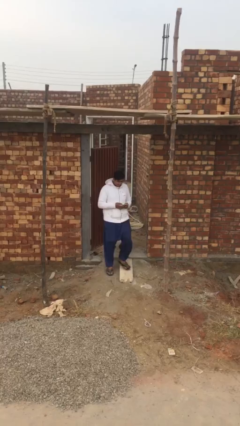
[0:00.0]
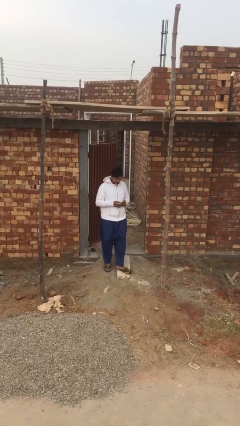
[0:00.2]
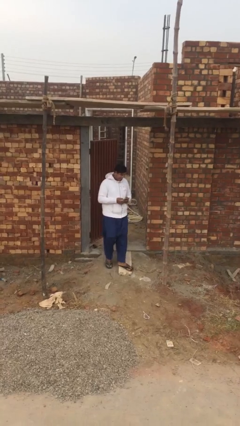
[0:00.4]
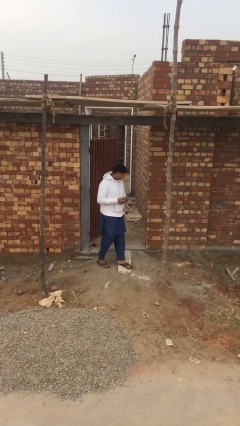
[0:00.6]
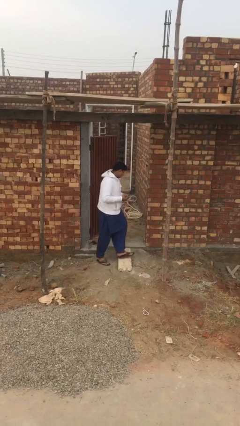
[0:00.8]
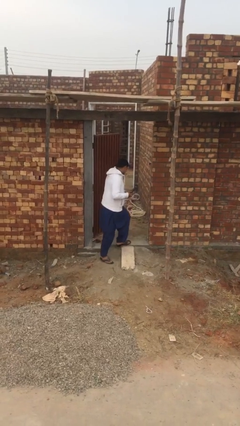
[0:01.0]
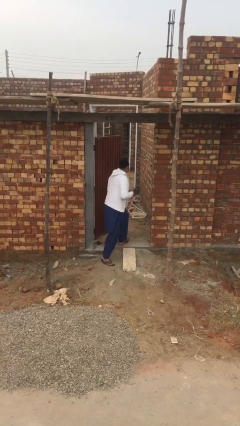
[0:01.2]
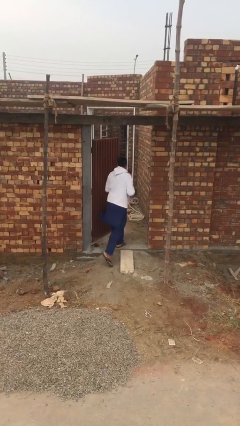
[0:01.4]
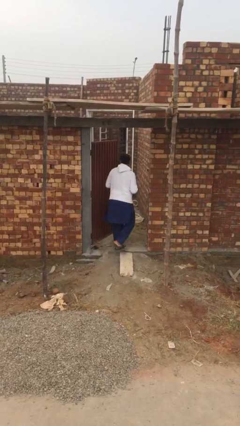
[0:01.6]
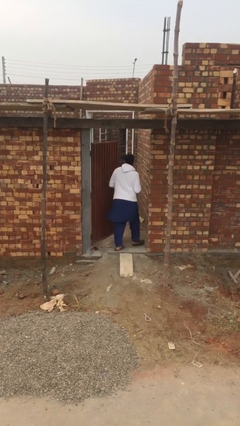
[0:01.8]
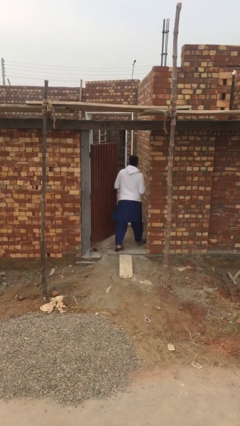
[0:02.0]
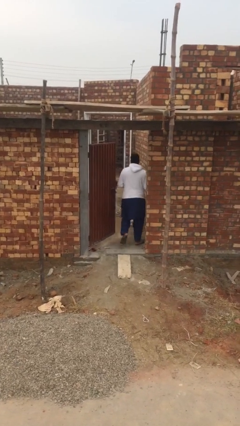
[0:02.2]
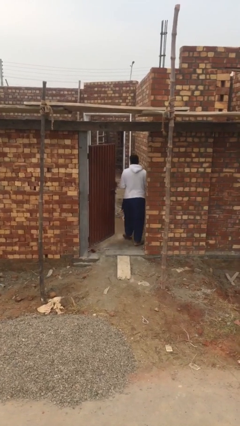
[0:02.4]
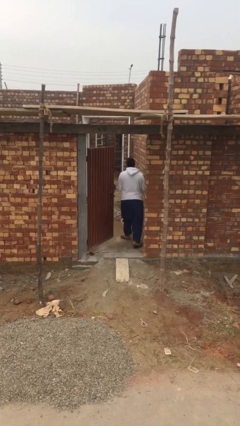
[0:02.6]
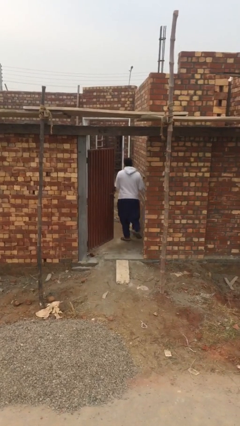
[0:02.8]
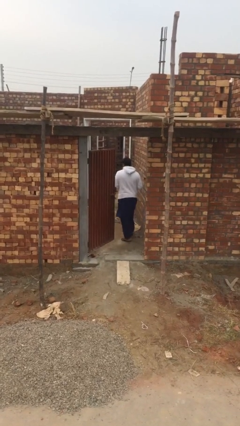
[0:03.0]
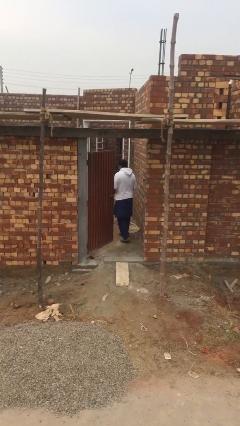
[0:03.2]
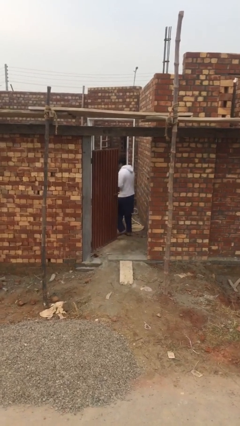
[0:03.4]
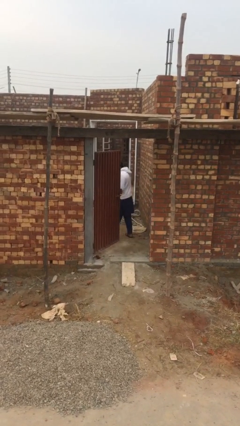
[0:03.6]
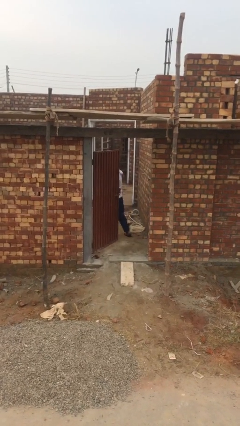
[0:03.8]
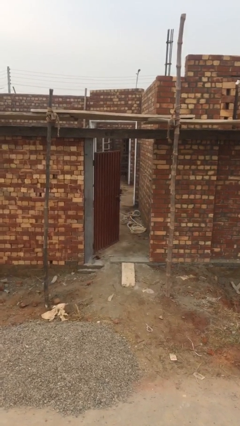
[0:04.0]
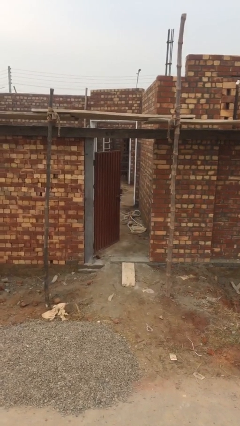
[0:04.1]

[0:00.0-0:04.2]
person exits scene through structure

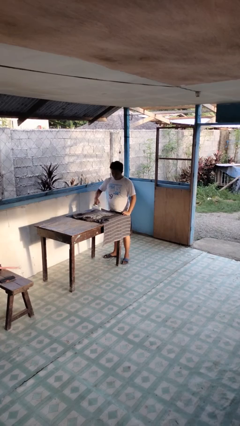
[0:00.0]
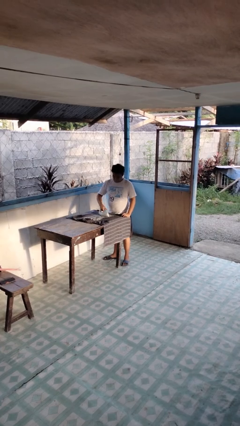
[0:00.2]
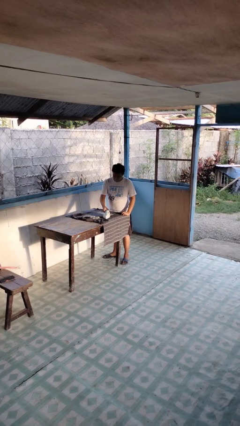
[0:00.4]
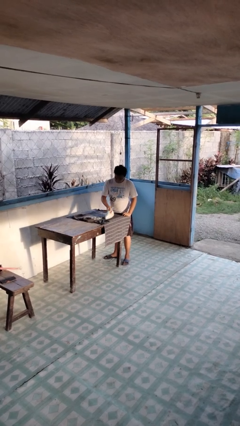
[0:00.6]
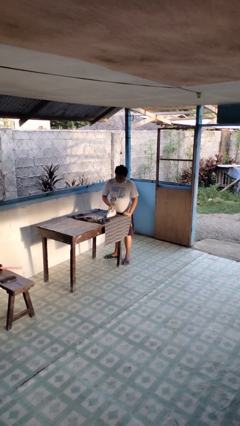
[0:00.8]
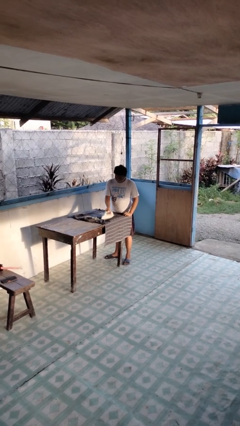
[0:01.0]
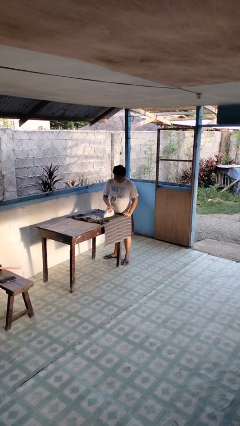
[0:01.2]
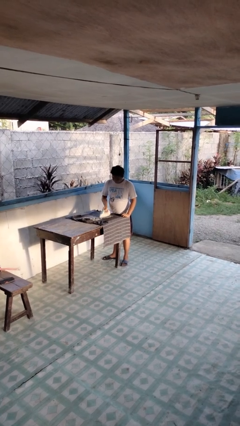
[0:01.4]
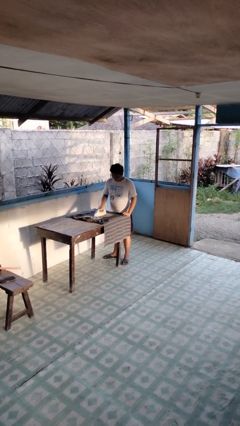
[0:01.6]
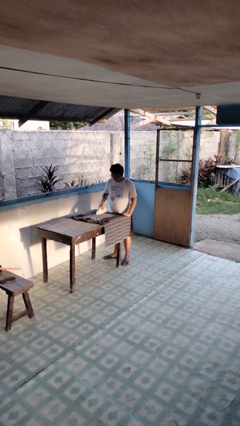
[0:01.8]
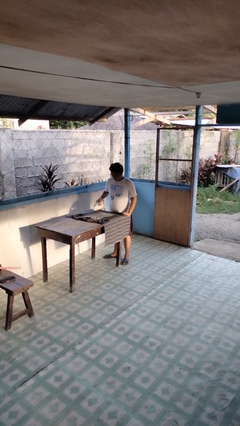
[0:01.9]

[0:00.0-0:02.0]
person irons clothes

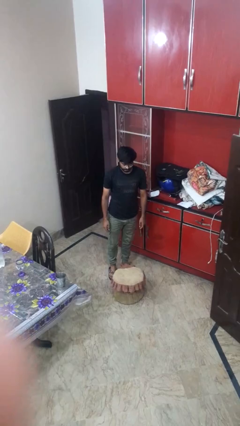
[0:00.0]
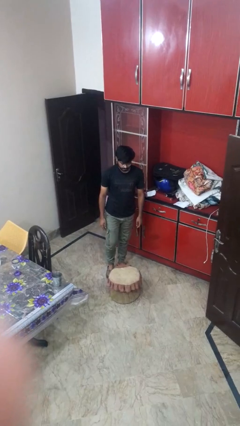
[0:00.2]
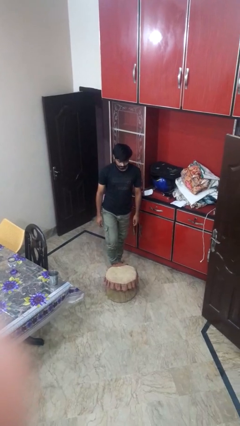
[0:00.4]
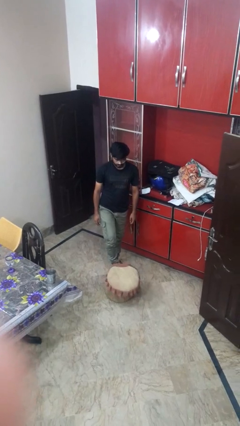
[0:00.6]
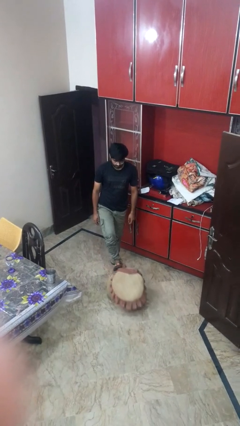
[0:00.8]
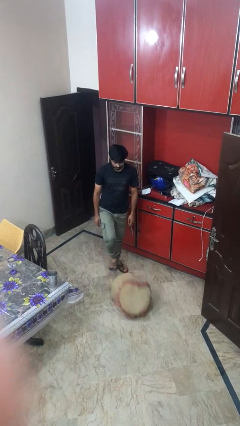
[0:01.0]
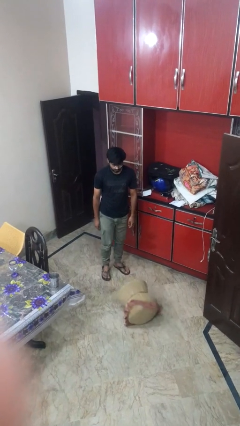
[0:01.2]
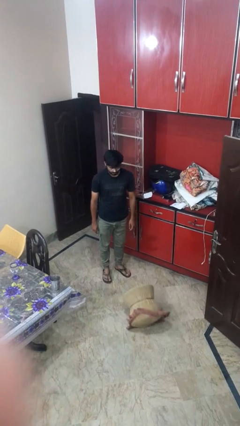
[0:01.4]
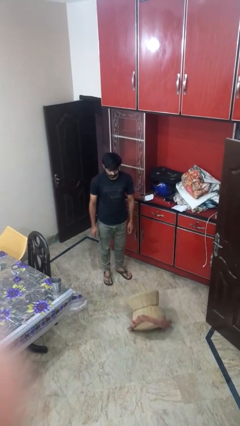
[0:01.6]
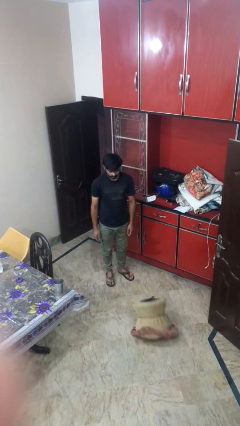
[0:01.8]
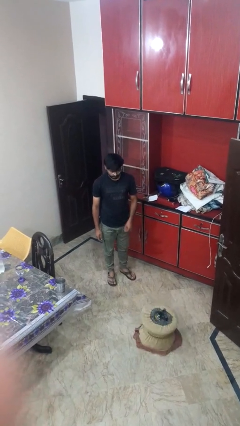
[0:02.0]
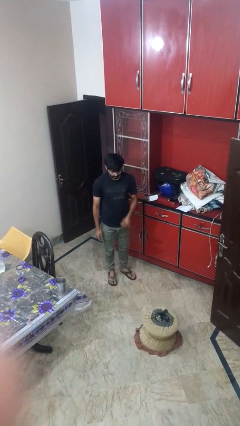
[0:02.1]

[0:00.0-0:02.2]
person knocks over furniture

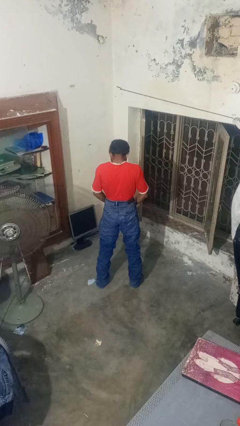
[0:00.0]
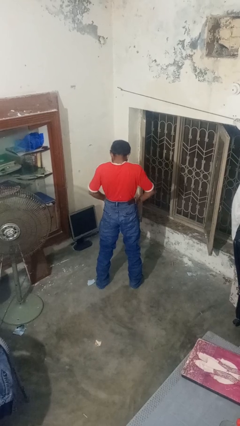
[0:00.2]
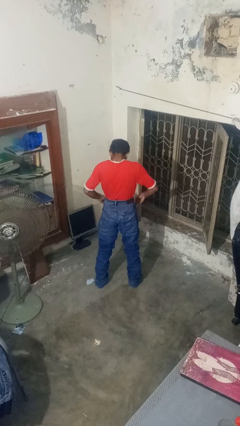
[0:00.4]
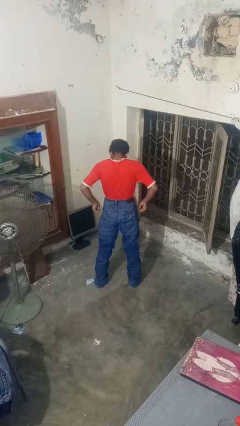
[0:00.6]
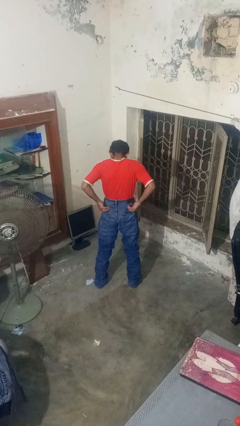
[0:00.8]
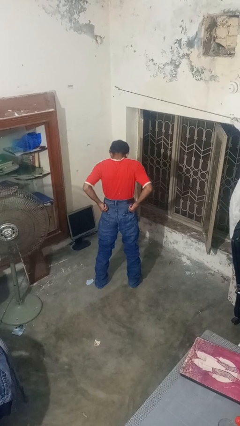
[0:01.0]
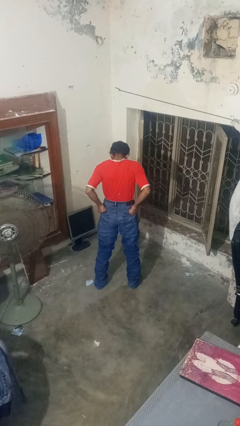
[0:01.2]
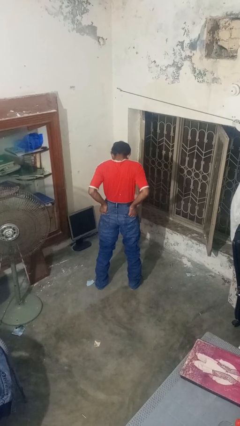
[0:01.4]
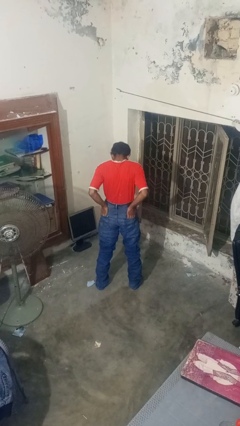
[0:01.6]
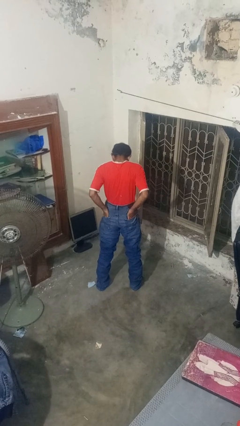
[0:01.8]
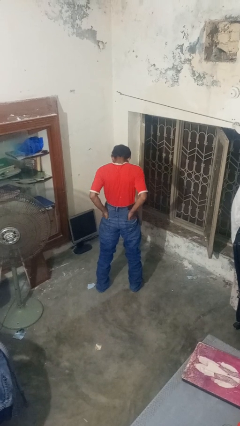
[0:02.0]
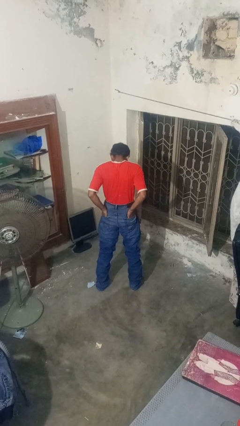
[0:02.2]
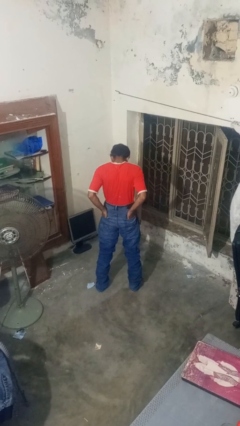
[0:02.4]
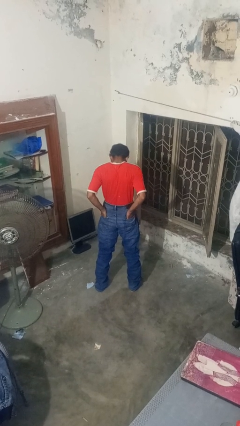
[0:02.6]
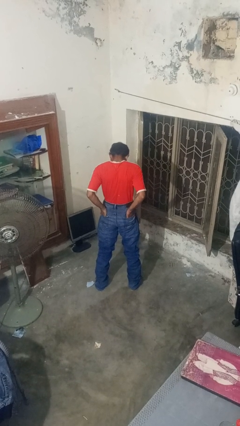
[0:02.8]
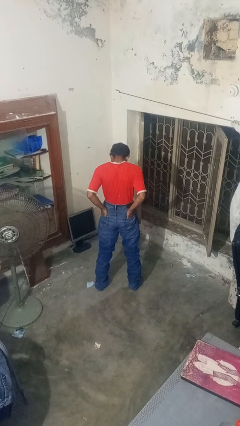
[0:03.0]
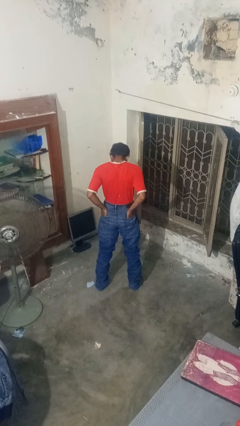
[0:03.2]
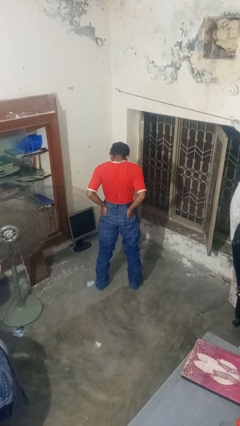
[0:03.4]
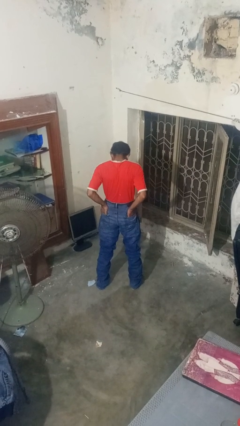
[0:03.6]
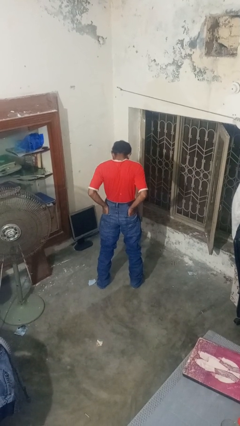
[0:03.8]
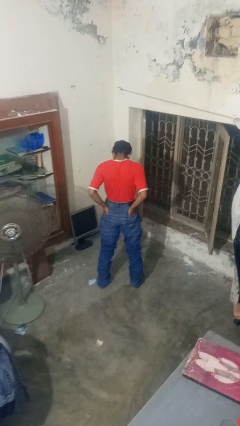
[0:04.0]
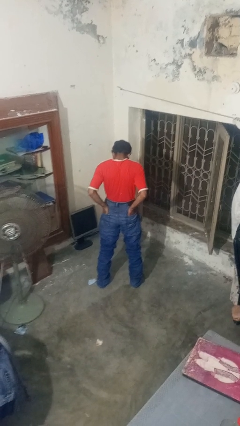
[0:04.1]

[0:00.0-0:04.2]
person puts hands in back pockets

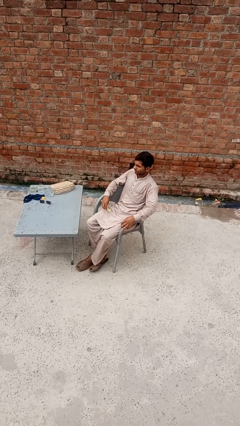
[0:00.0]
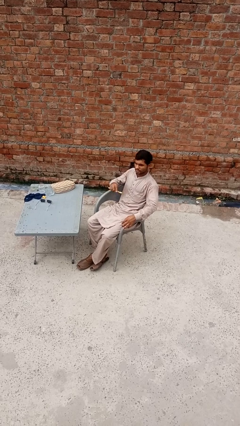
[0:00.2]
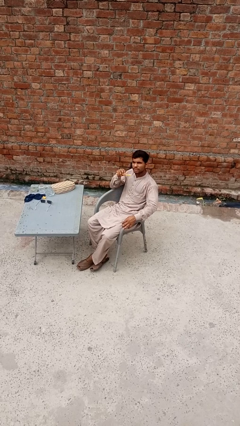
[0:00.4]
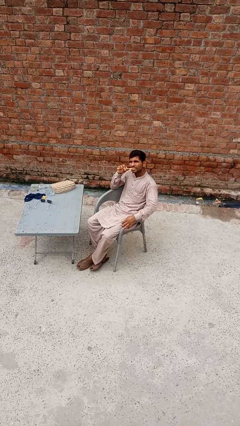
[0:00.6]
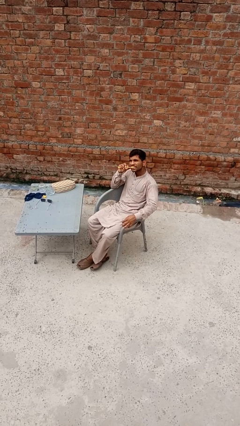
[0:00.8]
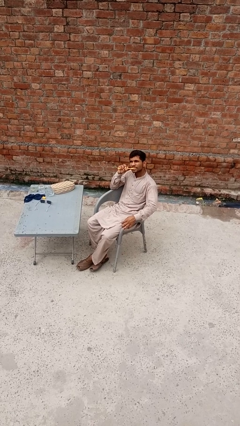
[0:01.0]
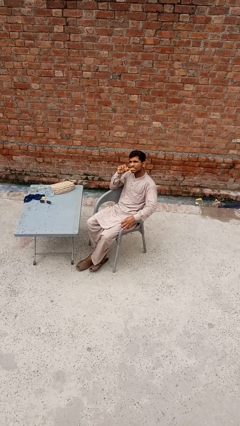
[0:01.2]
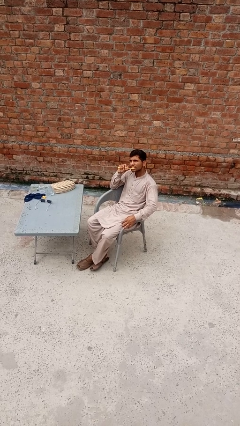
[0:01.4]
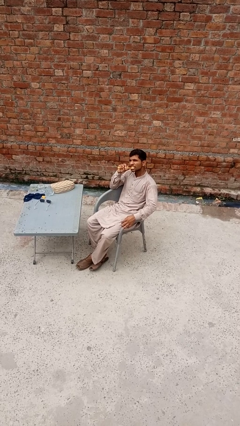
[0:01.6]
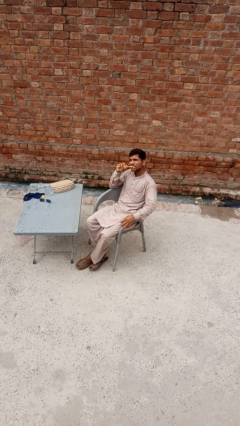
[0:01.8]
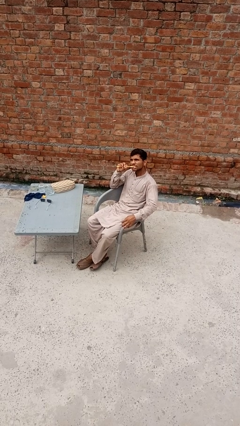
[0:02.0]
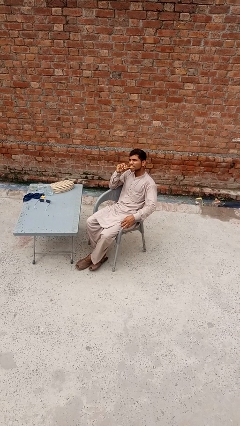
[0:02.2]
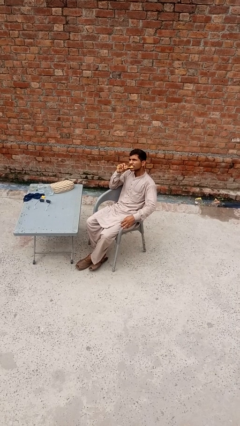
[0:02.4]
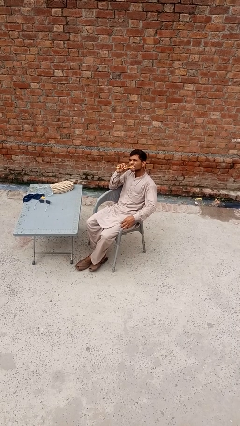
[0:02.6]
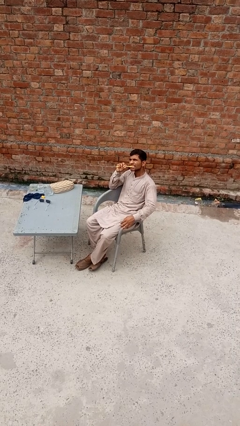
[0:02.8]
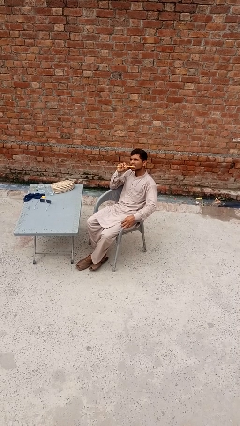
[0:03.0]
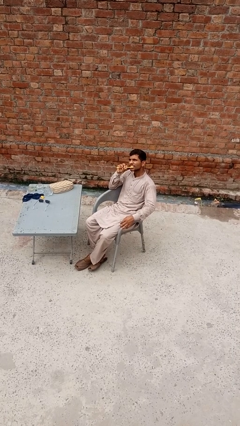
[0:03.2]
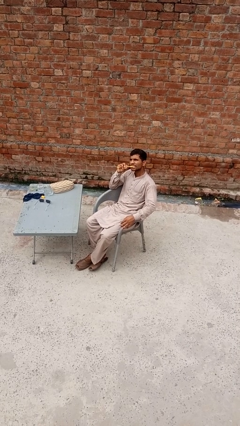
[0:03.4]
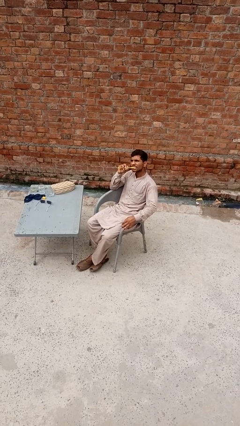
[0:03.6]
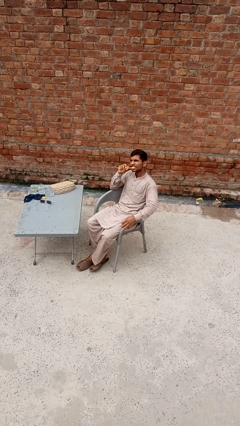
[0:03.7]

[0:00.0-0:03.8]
person brushes teeth

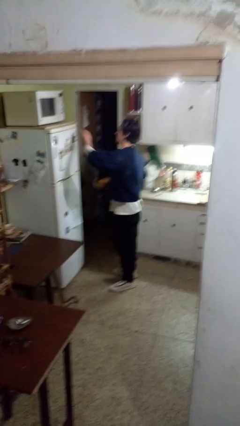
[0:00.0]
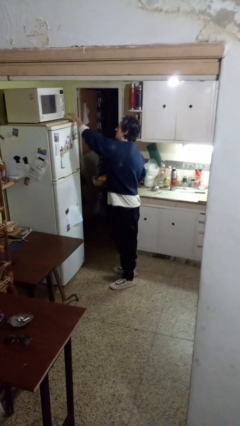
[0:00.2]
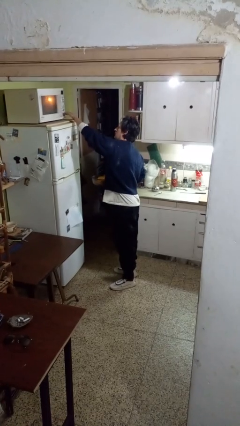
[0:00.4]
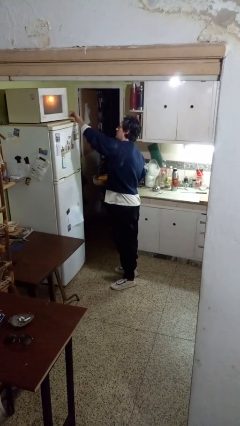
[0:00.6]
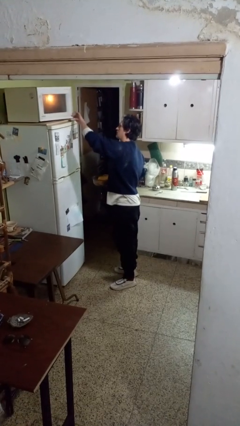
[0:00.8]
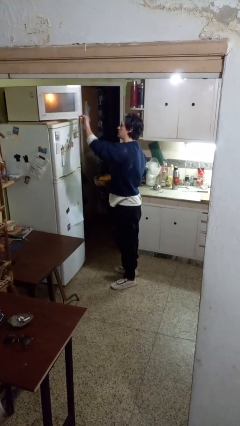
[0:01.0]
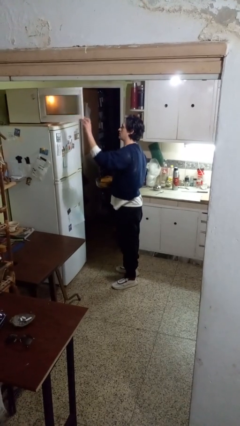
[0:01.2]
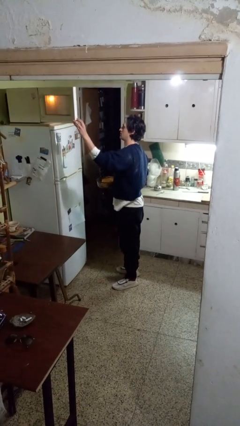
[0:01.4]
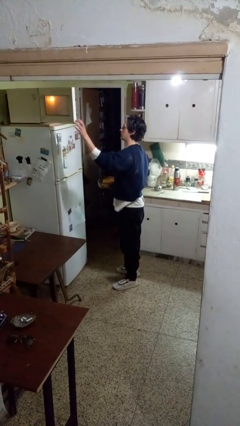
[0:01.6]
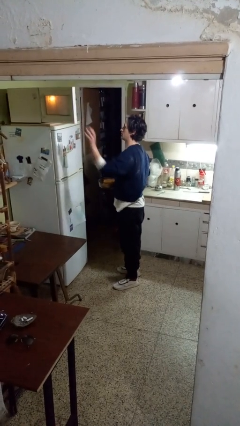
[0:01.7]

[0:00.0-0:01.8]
person opens microwave
